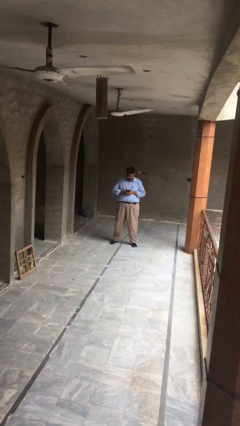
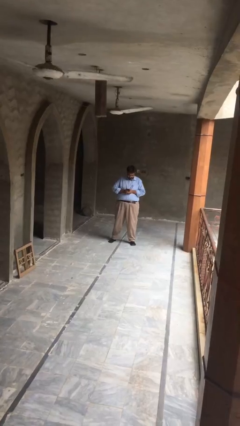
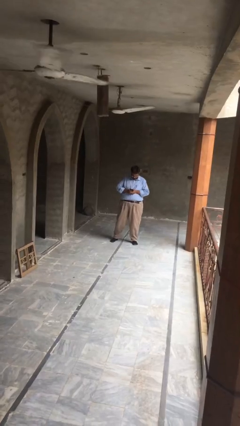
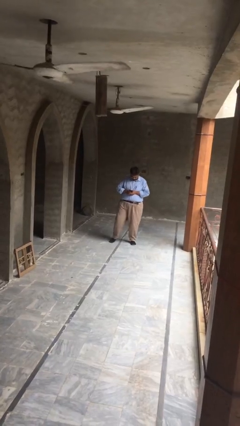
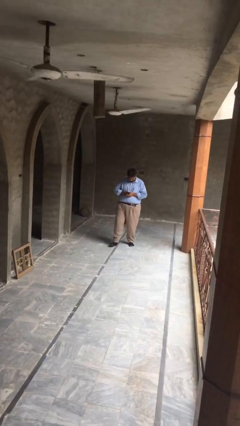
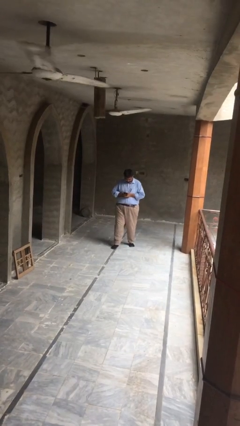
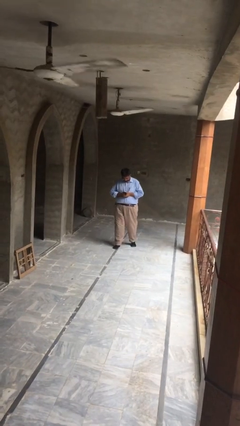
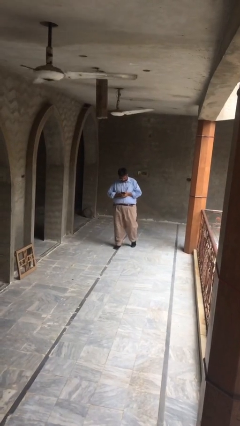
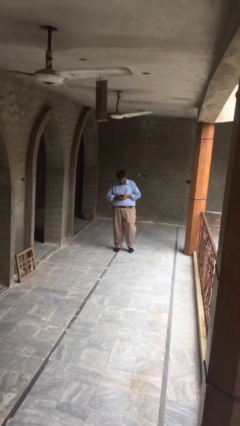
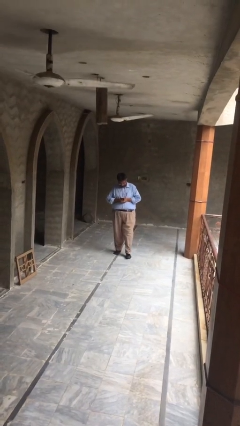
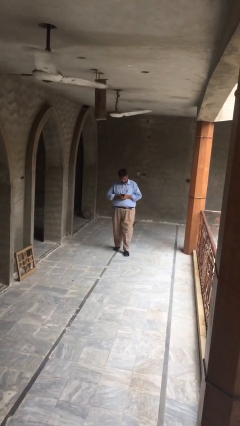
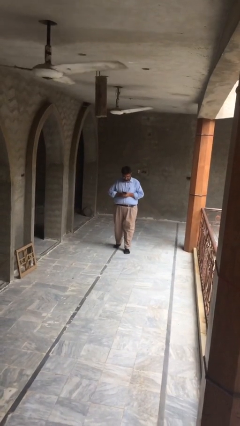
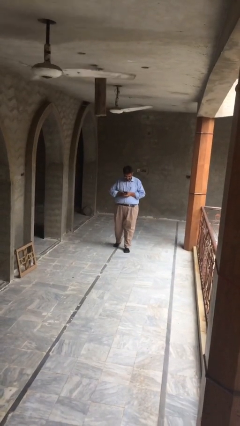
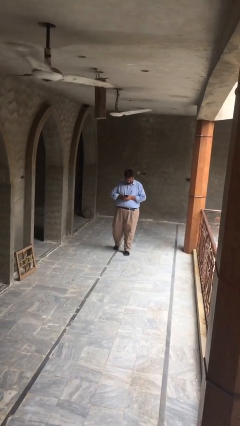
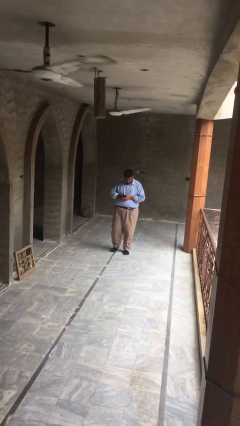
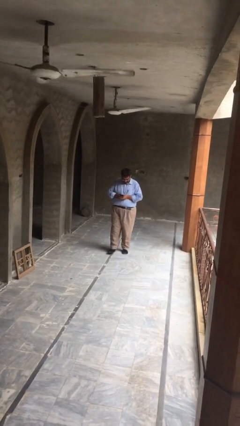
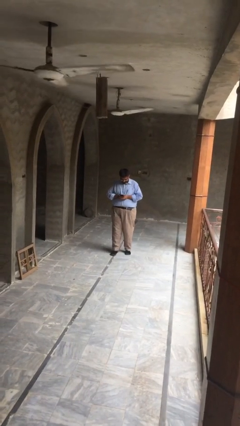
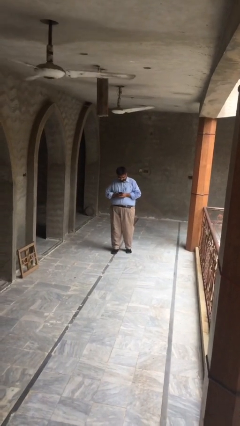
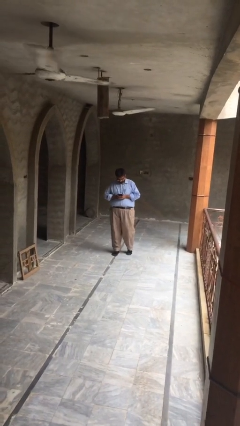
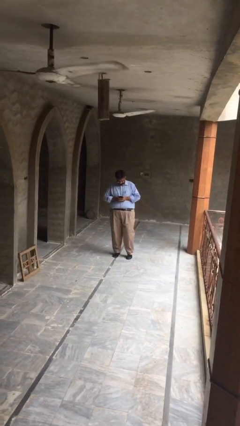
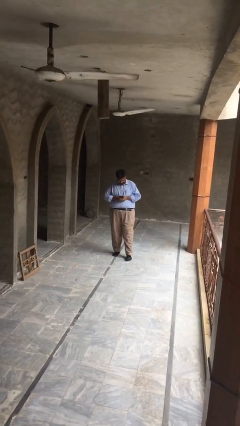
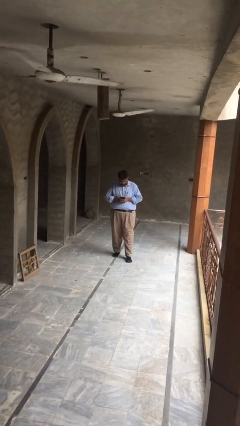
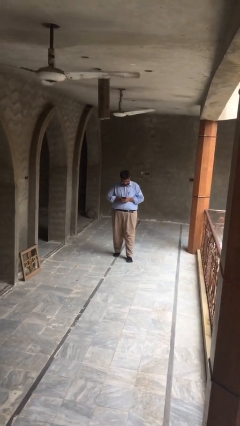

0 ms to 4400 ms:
person texts on phone

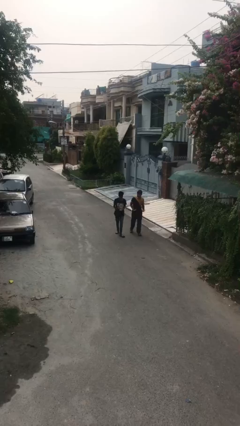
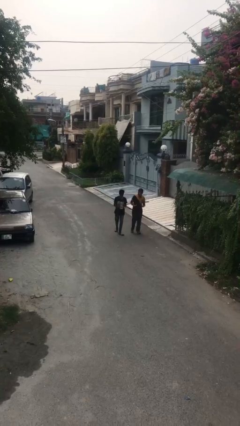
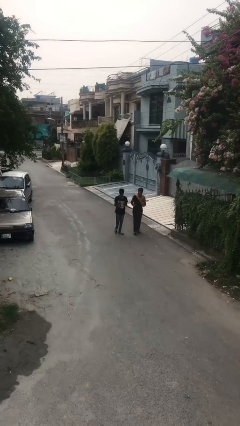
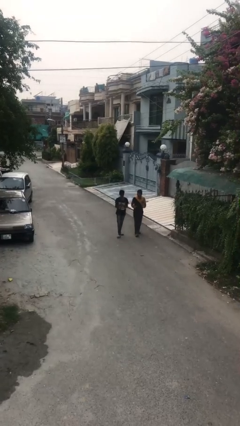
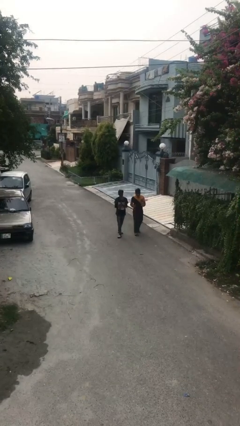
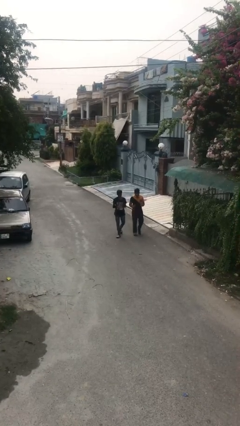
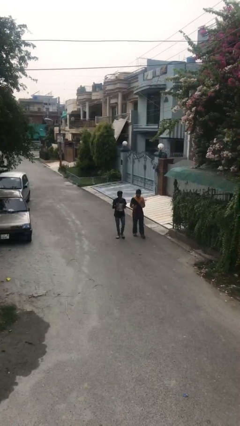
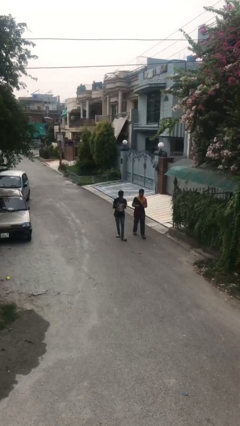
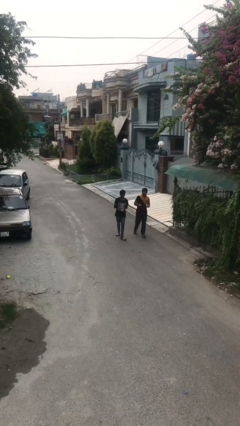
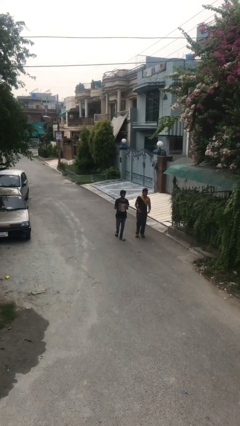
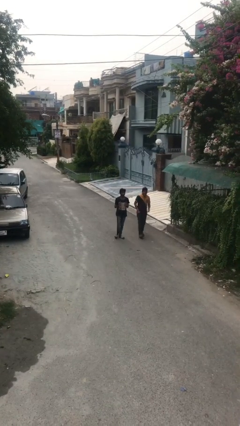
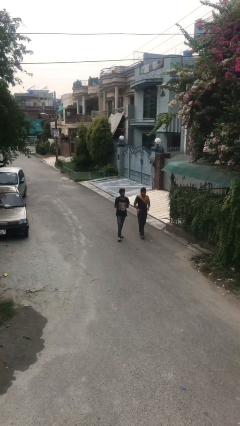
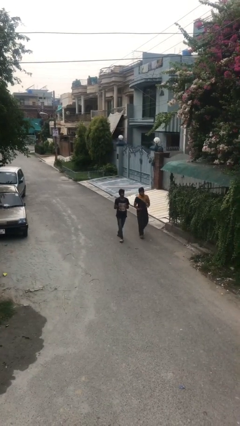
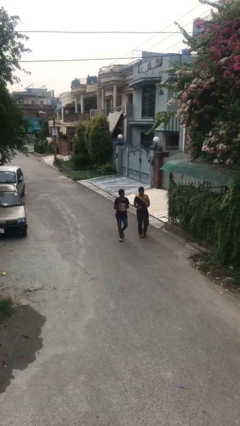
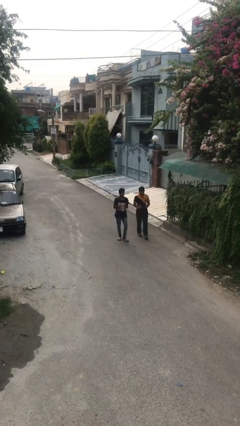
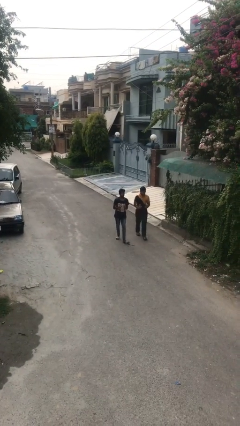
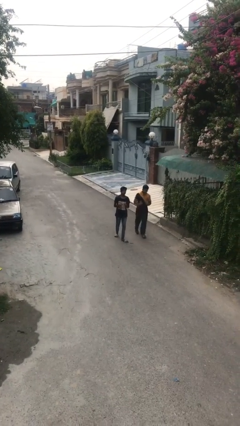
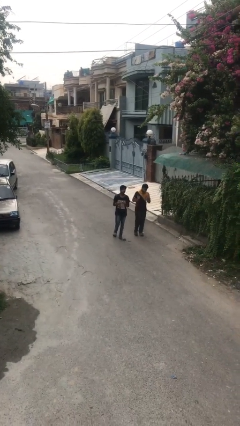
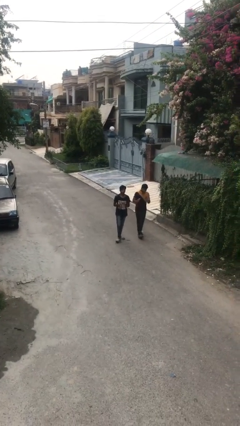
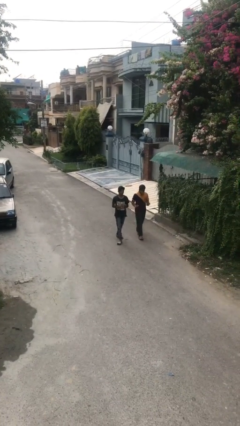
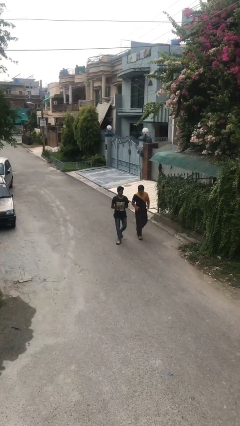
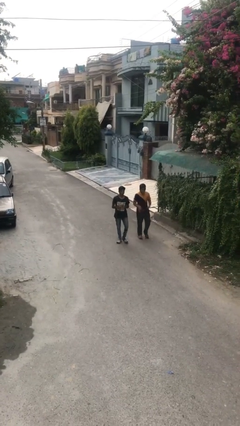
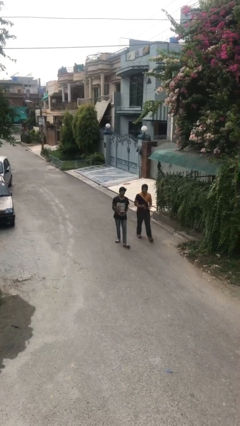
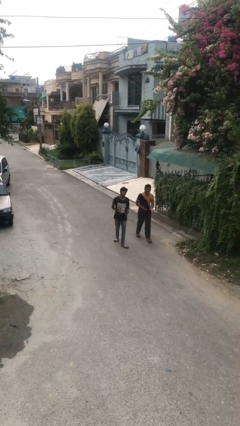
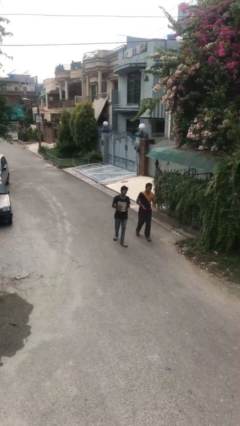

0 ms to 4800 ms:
person talks to person

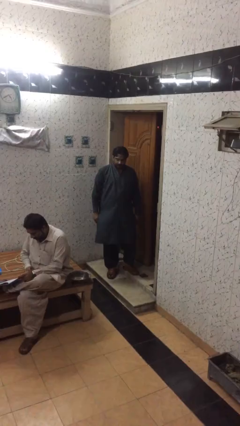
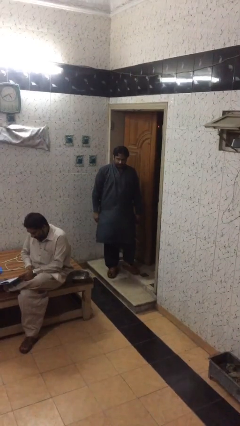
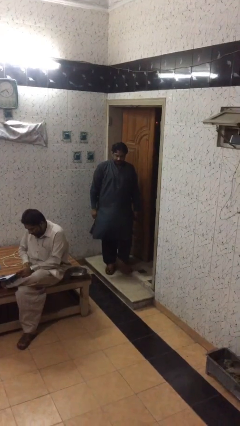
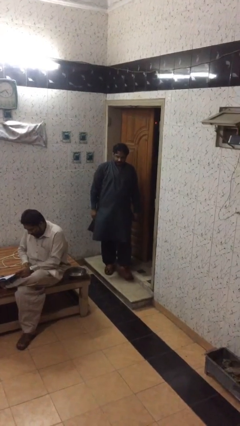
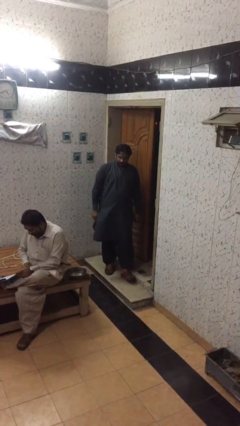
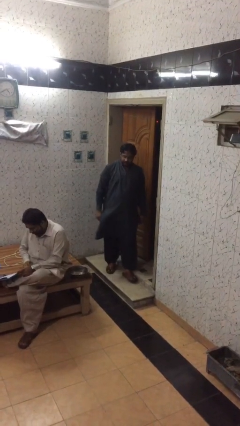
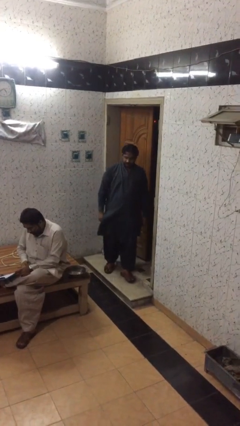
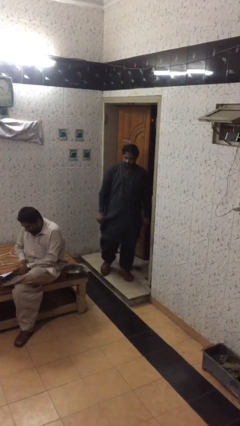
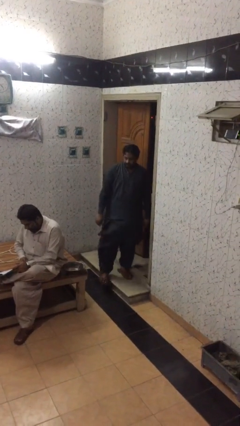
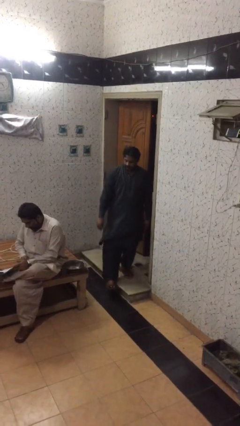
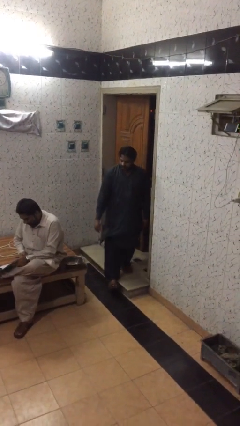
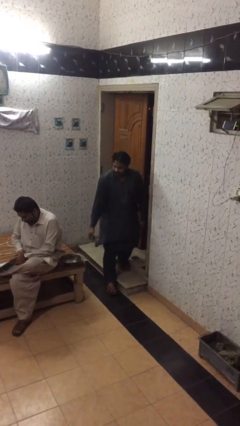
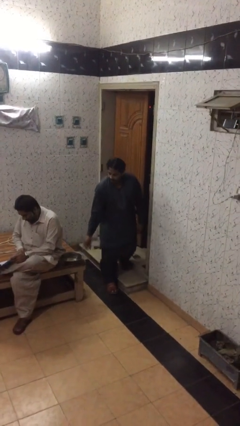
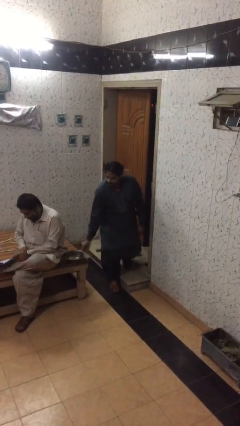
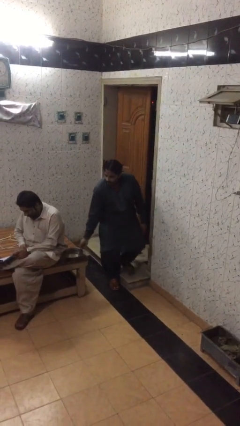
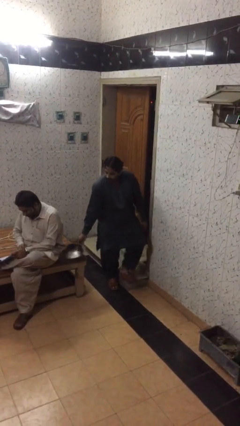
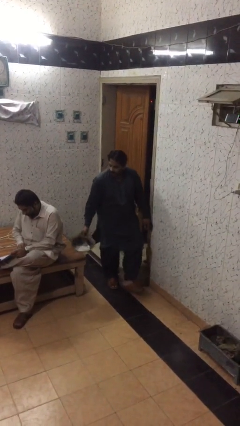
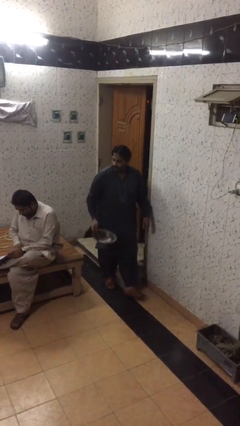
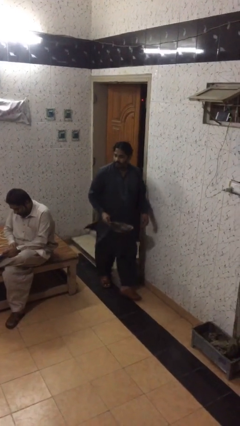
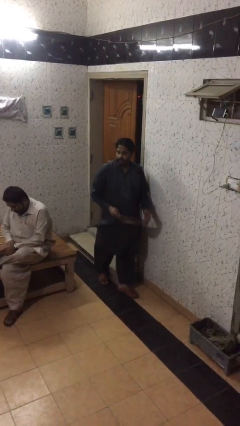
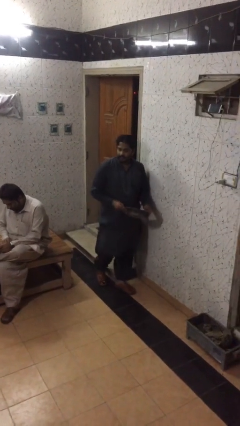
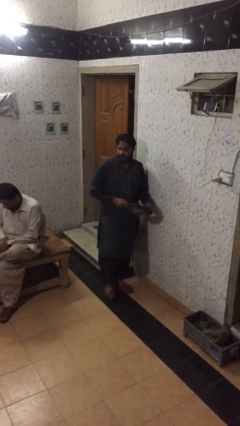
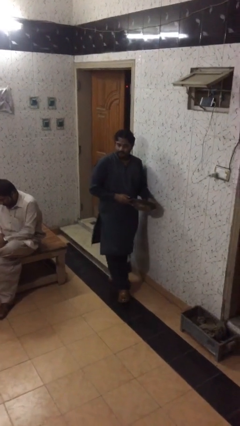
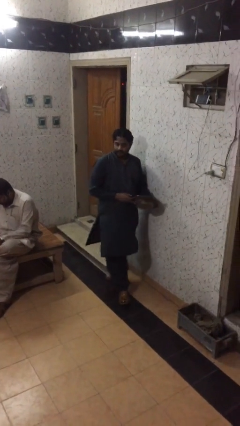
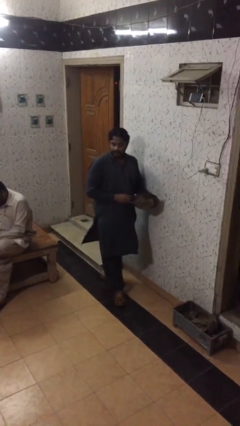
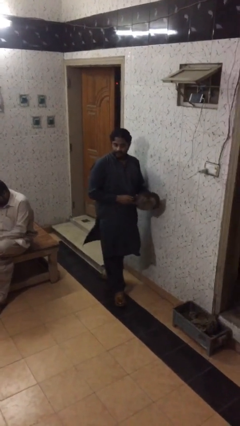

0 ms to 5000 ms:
person steals object from person

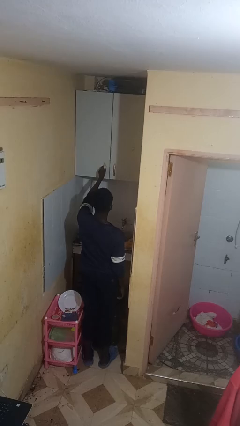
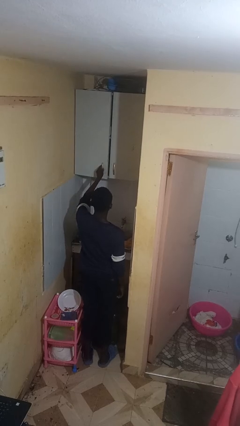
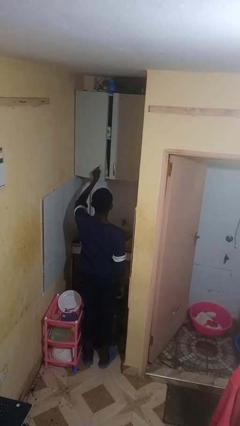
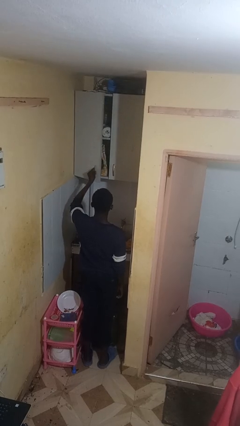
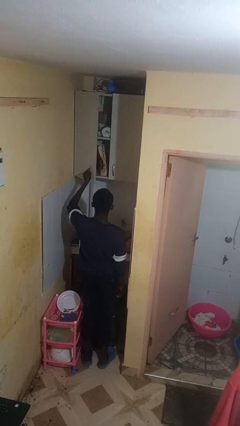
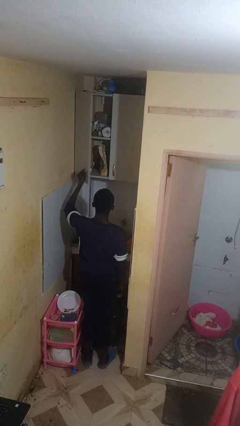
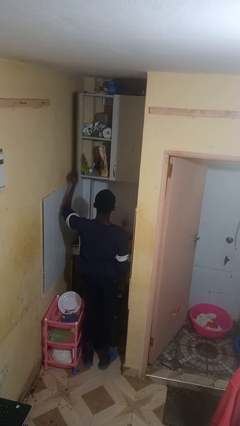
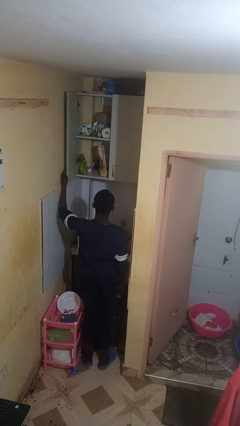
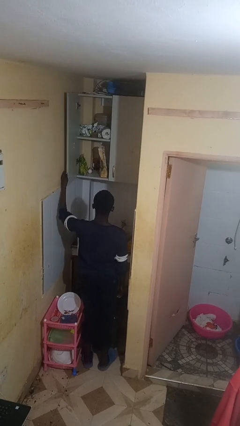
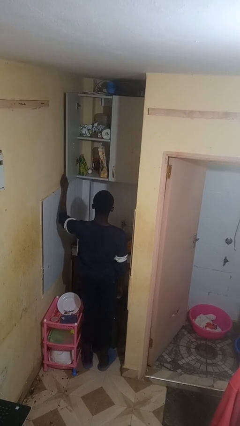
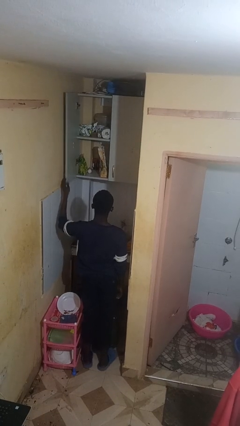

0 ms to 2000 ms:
person opens cabinet

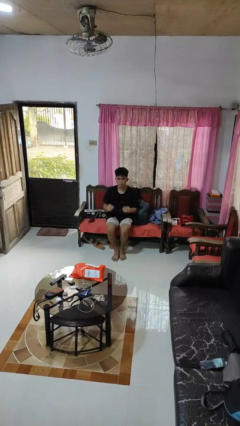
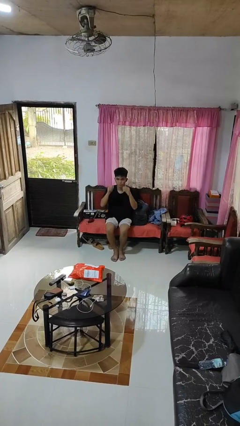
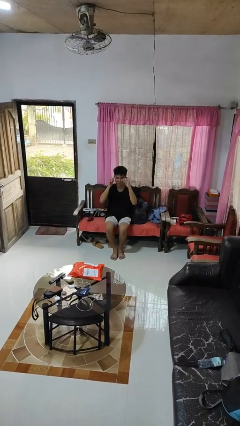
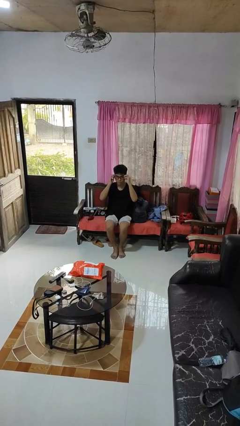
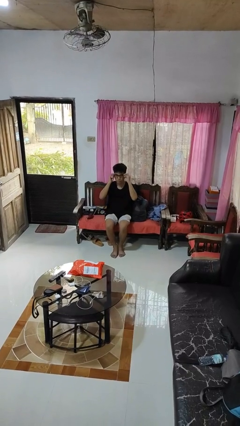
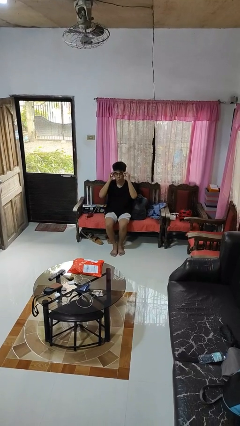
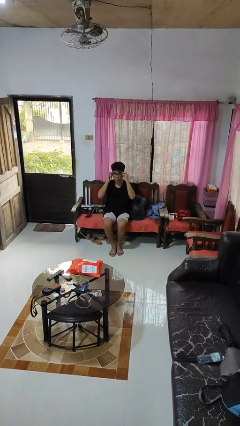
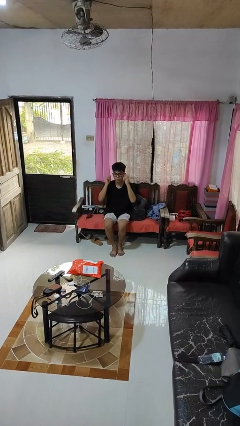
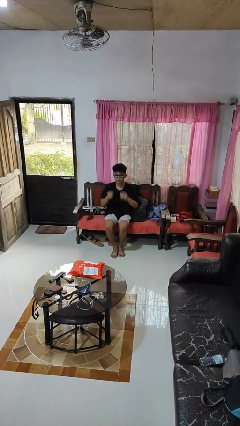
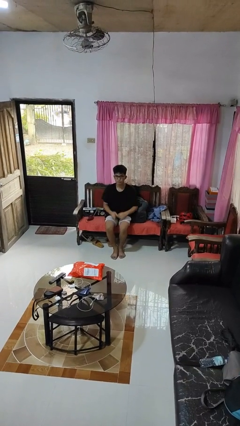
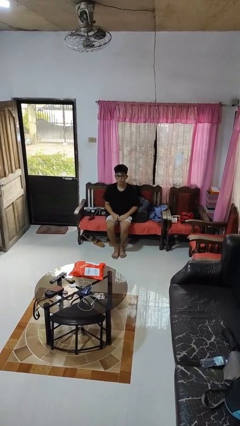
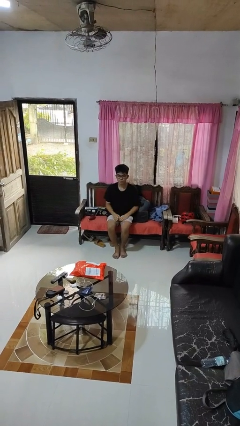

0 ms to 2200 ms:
person puts on glasses
